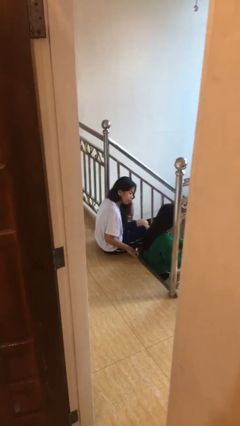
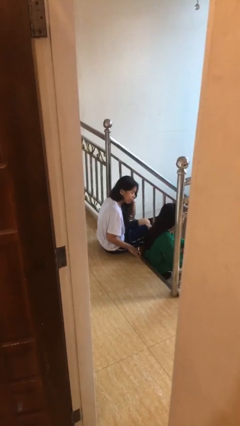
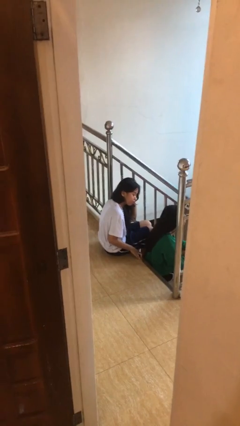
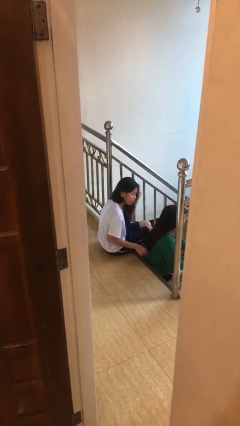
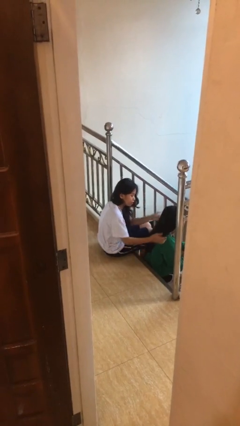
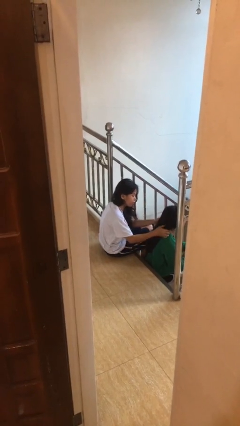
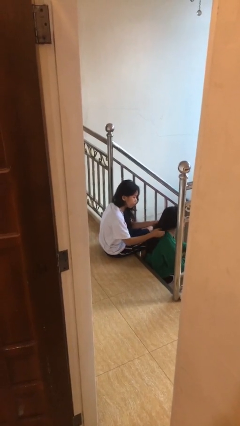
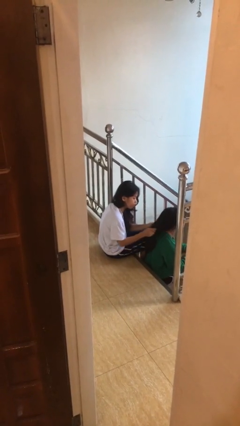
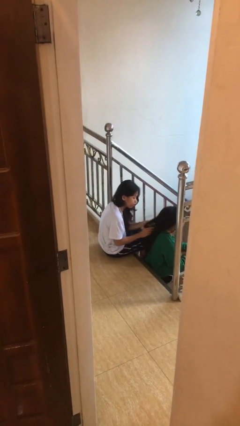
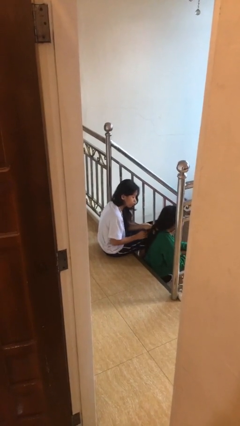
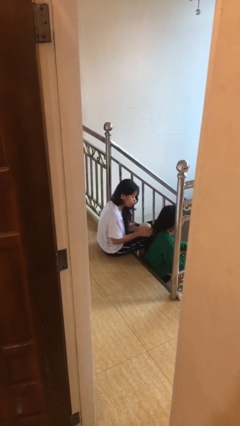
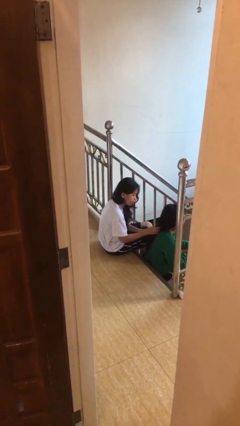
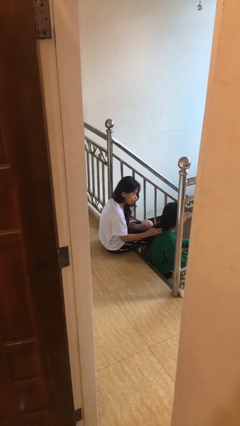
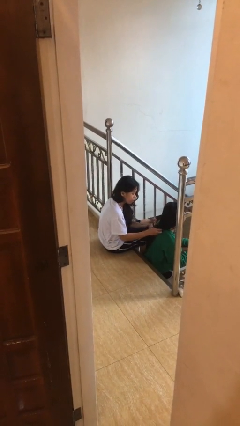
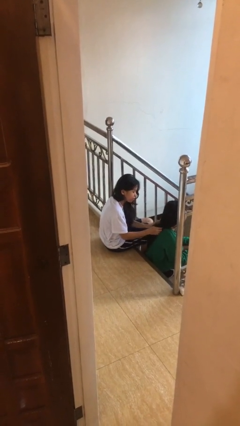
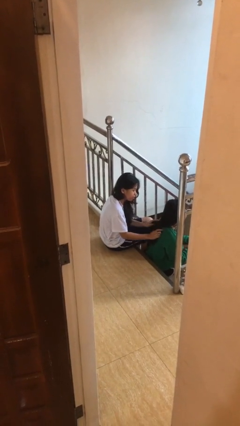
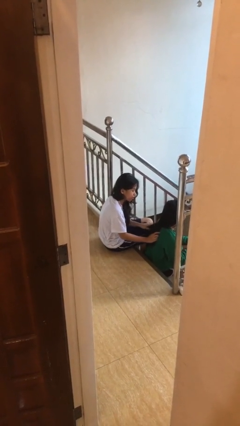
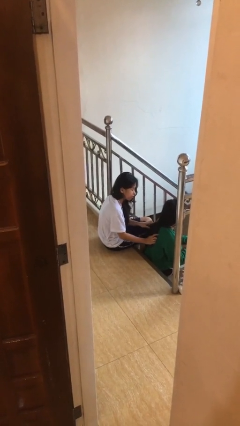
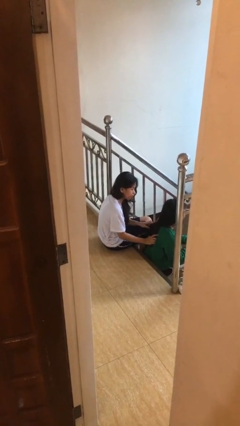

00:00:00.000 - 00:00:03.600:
person braids hair of person

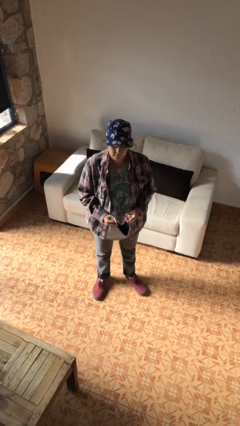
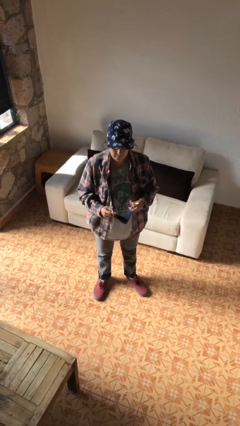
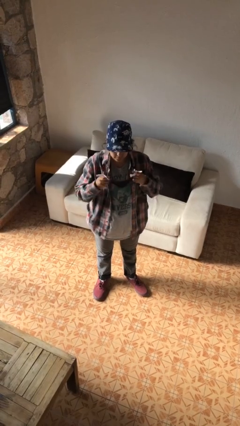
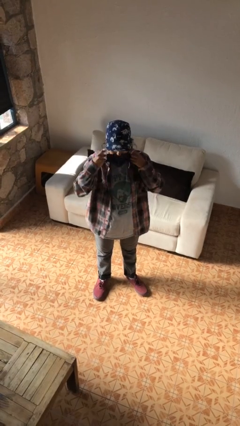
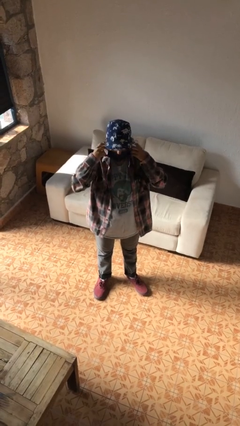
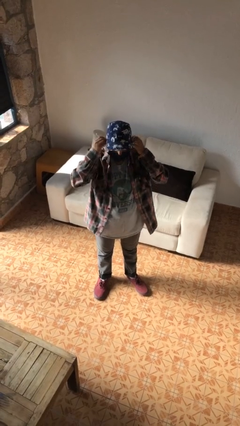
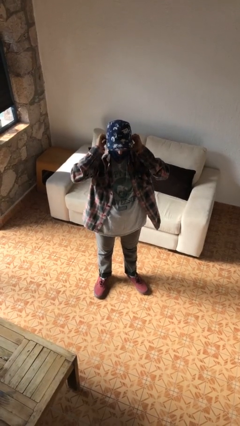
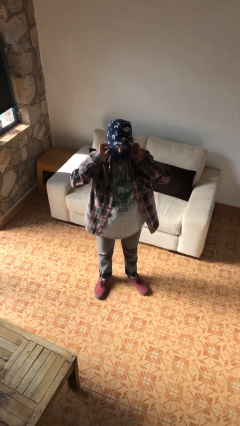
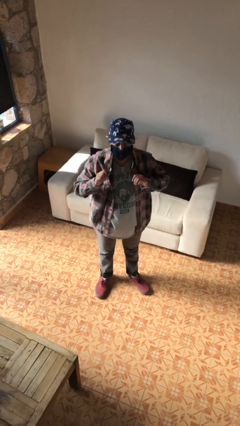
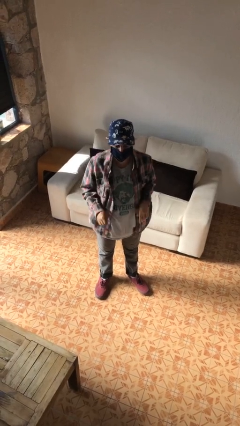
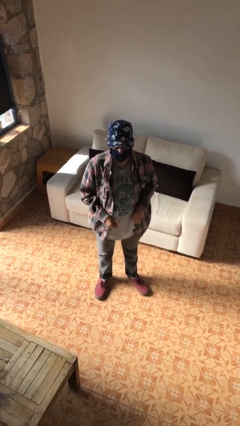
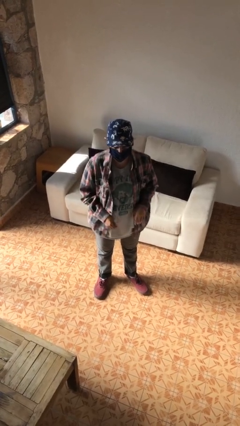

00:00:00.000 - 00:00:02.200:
person puts on facemask

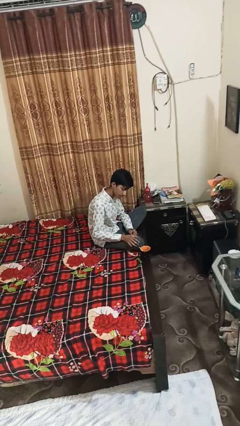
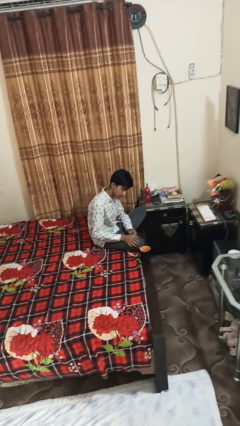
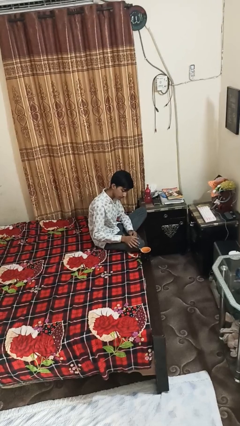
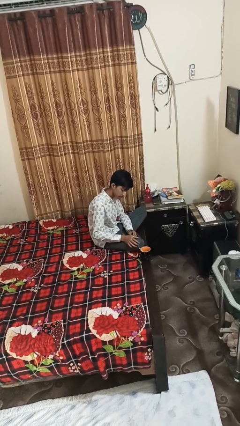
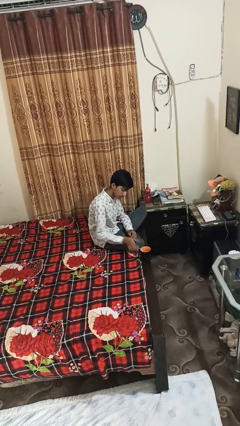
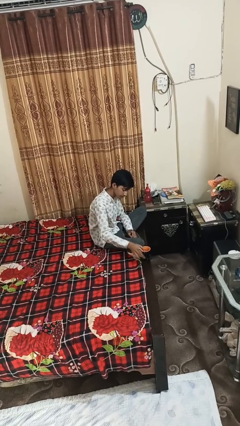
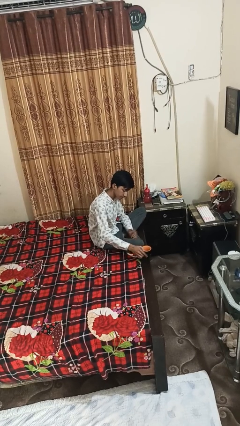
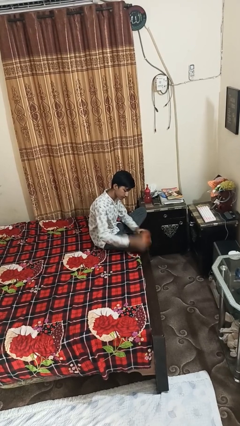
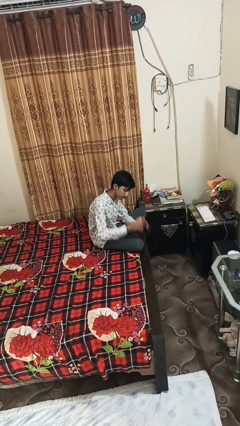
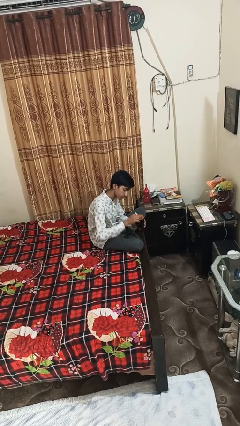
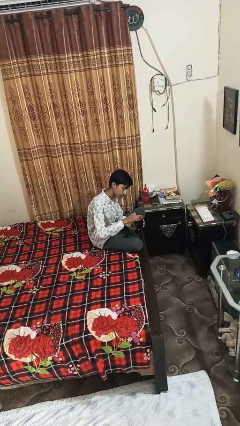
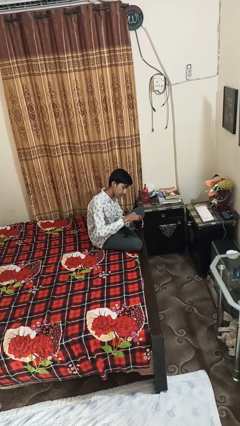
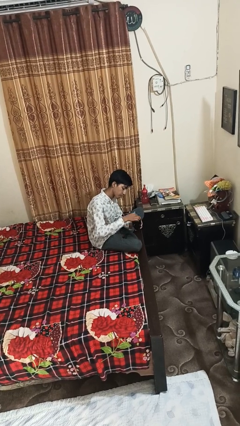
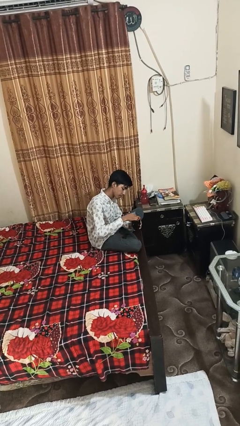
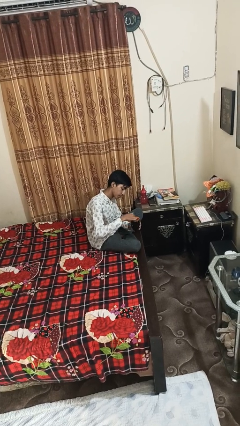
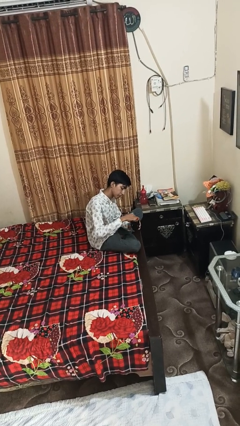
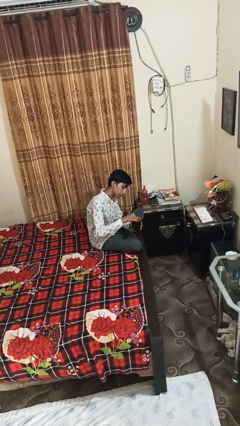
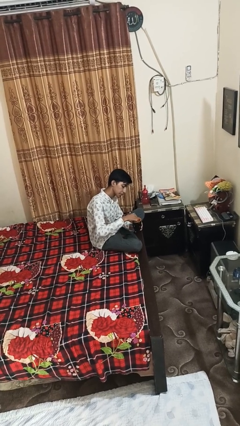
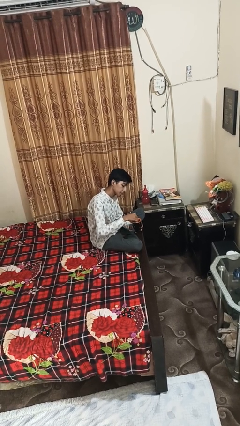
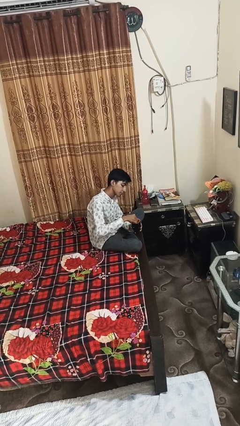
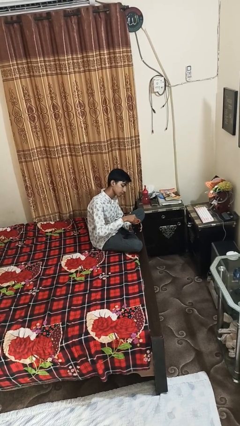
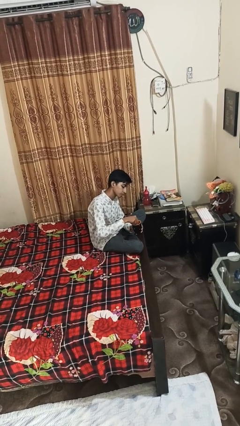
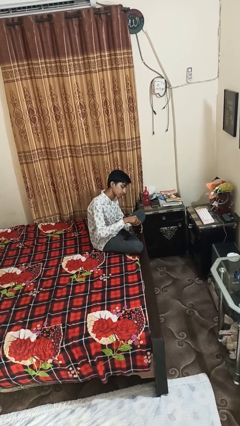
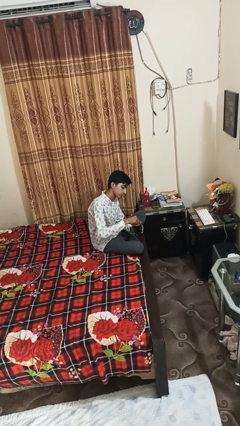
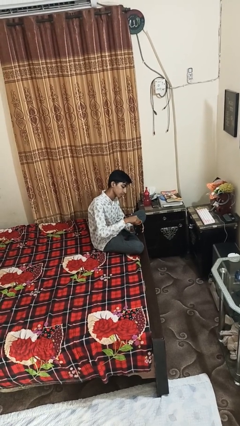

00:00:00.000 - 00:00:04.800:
person stirs mug

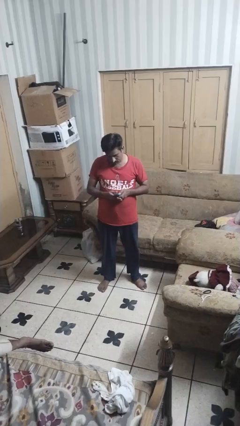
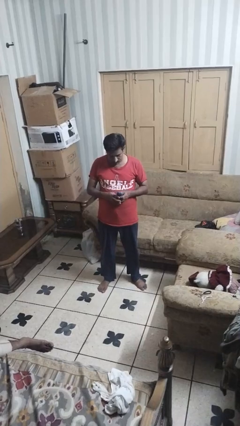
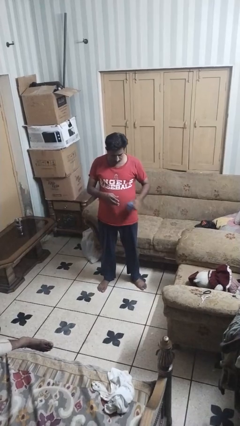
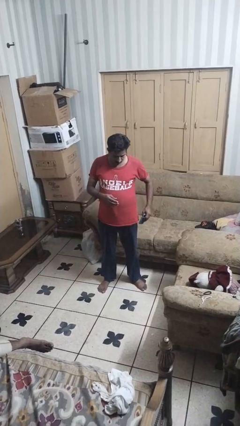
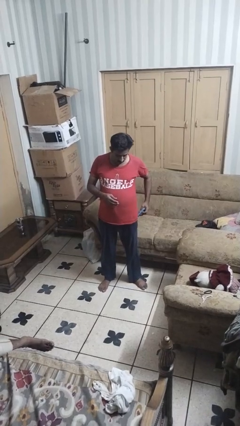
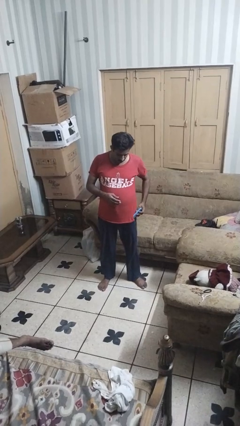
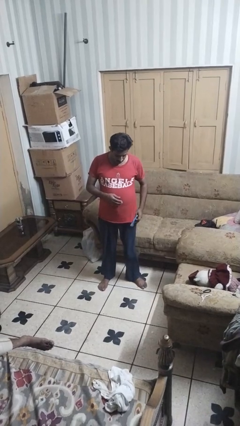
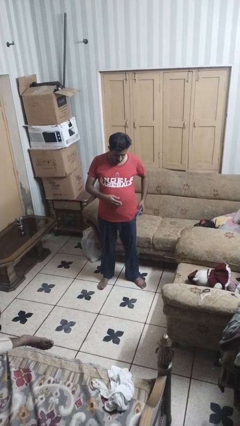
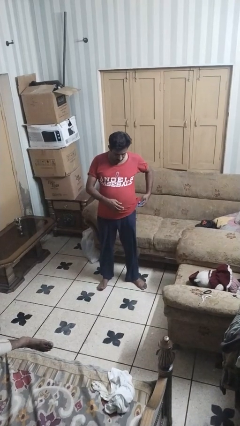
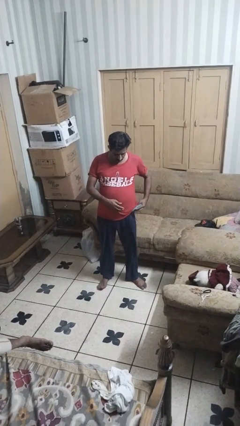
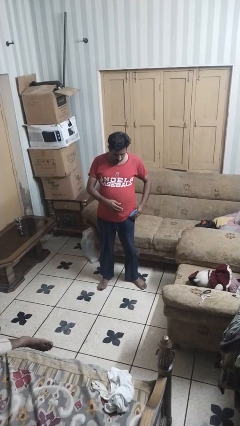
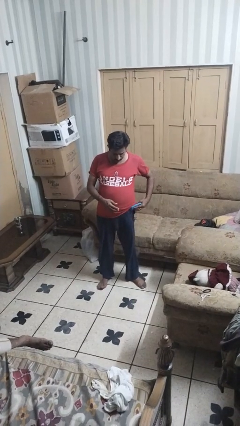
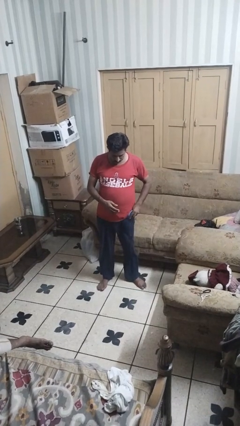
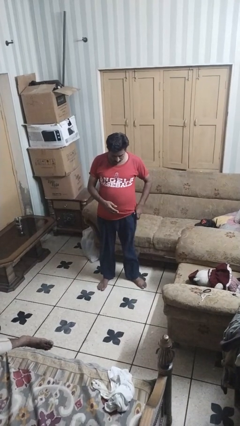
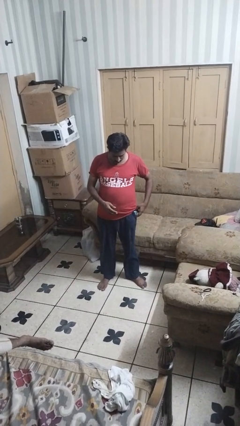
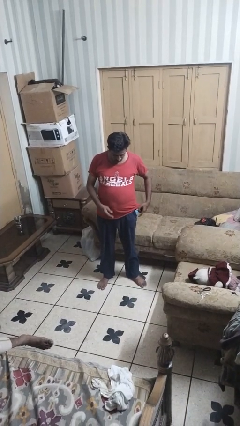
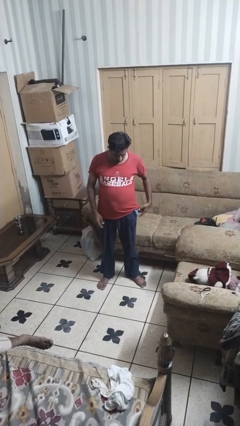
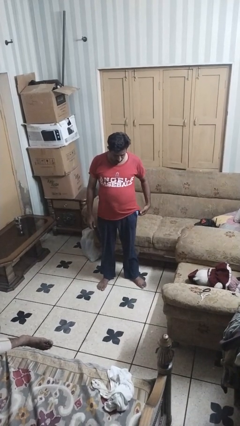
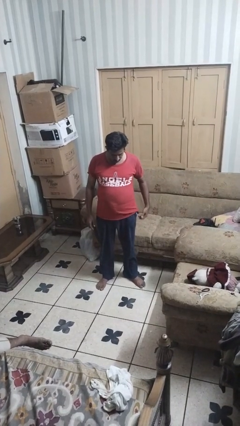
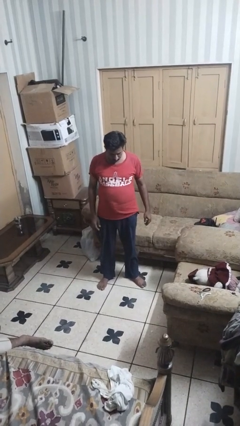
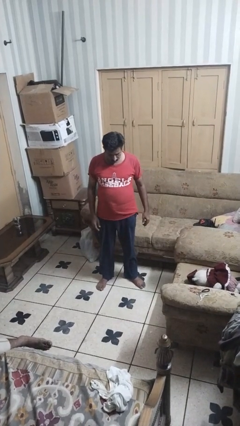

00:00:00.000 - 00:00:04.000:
person puts phone into pocket

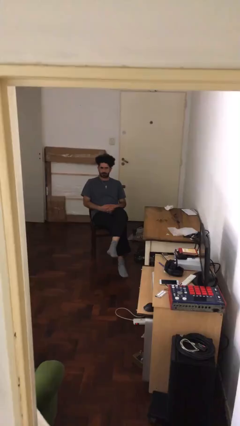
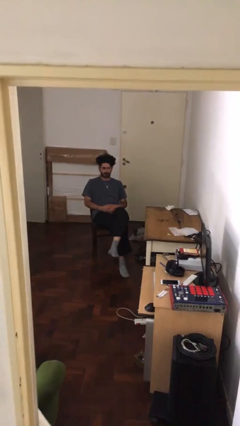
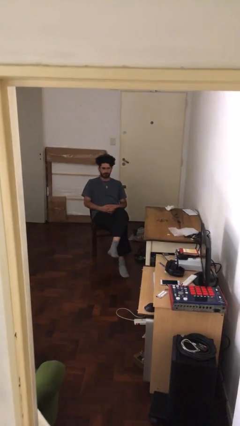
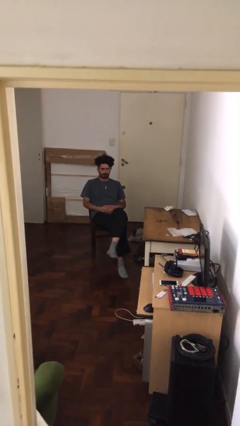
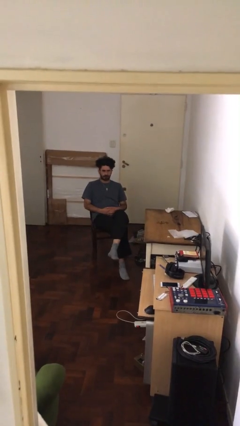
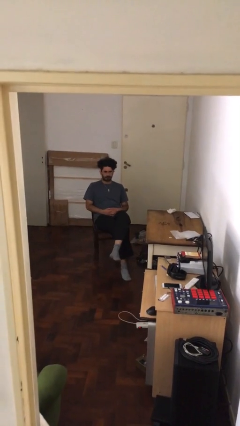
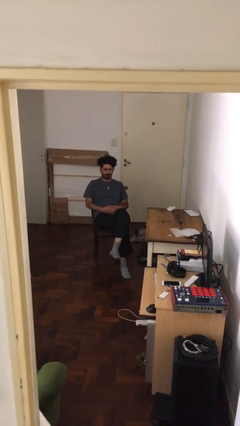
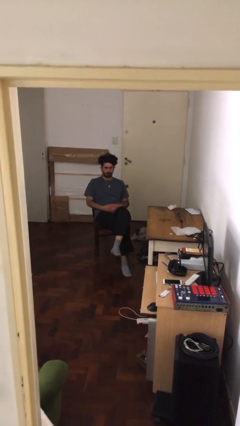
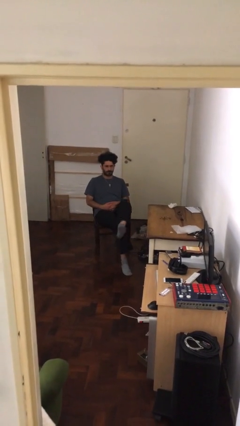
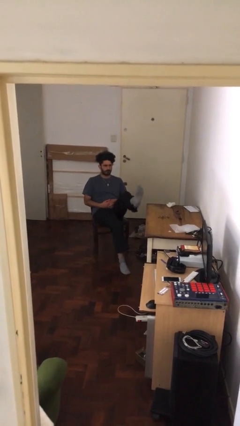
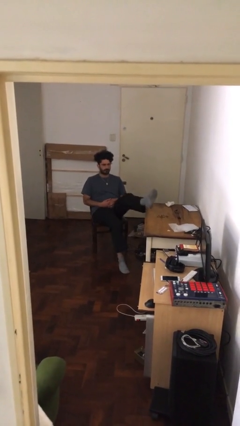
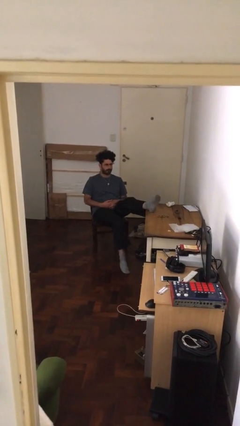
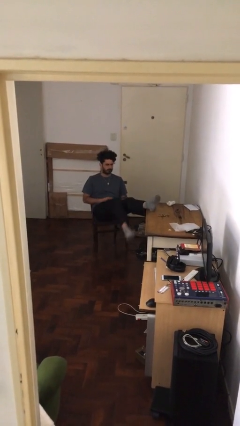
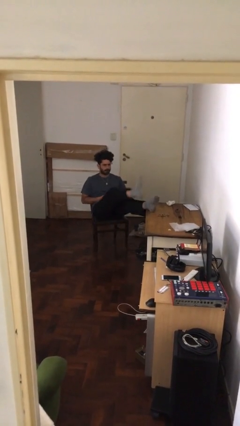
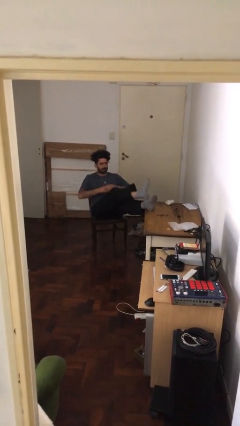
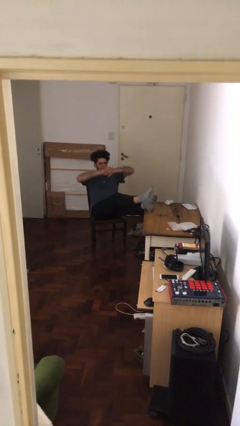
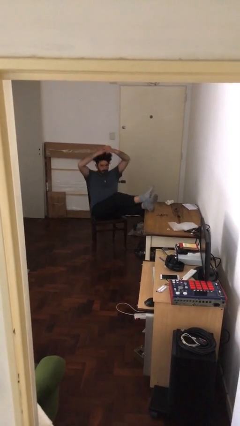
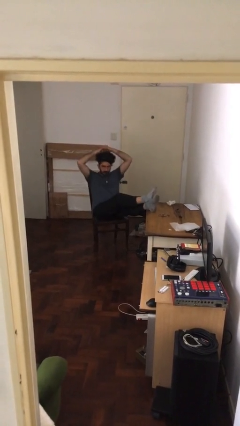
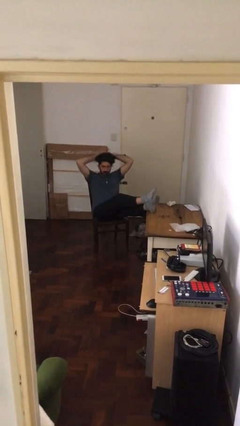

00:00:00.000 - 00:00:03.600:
person puts feet up
